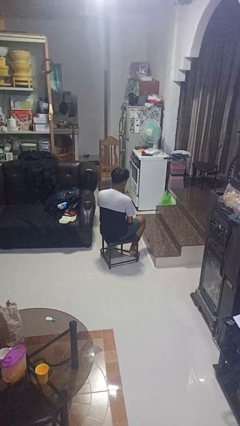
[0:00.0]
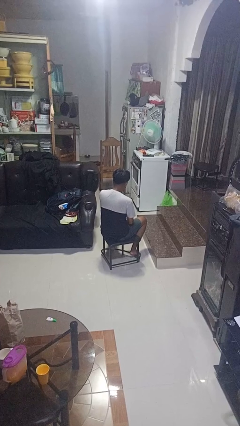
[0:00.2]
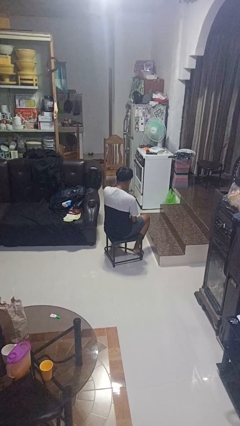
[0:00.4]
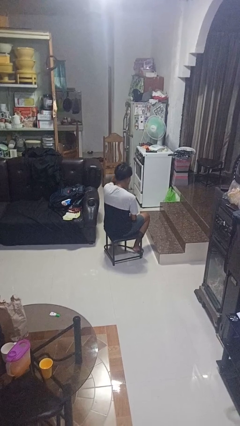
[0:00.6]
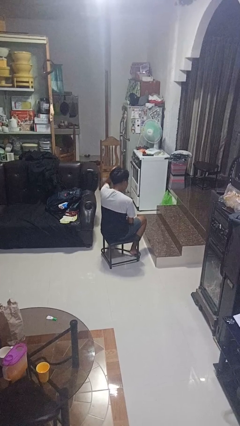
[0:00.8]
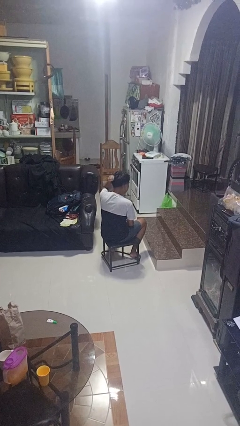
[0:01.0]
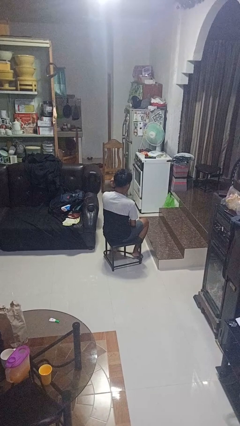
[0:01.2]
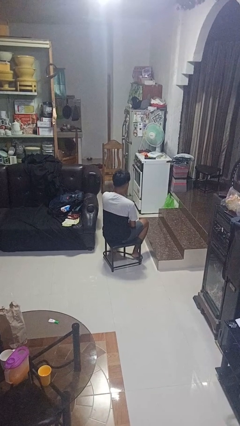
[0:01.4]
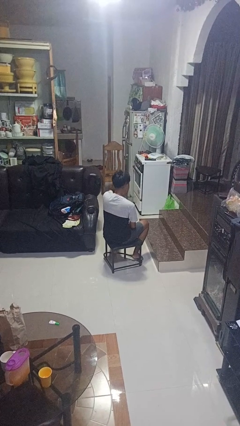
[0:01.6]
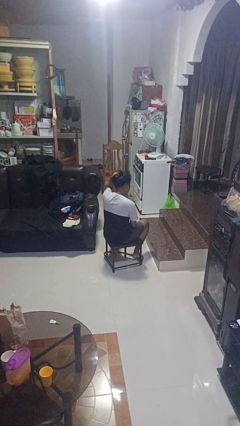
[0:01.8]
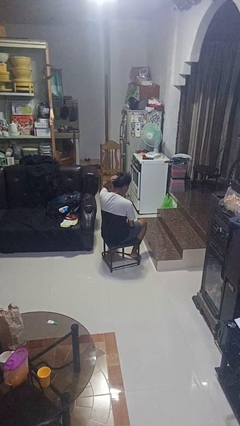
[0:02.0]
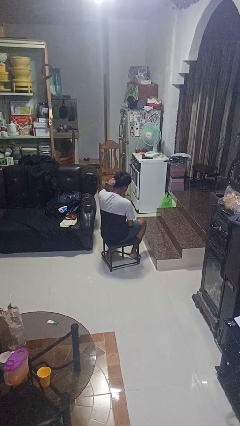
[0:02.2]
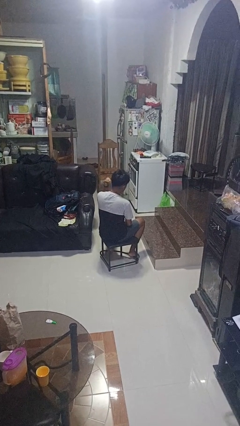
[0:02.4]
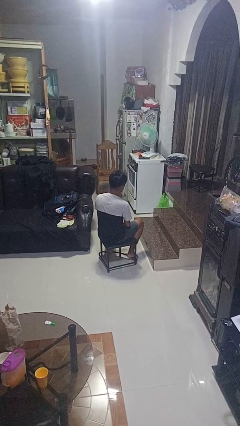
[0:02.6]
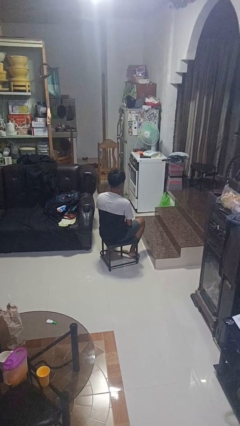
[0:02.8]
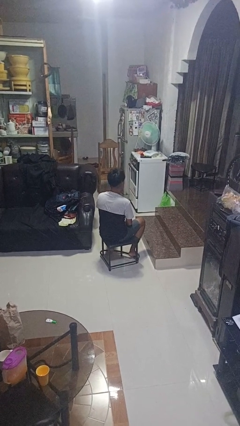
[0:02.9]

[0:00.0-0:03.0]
person strokes hair

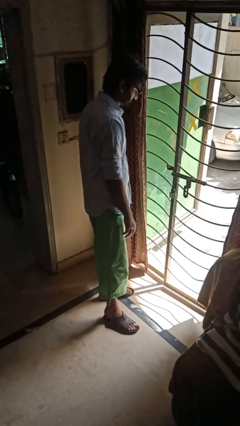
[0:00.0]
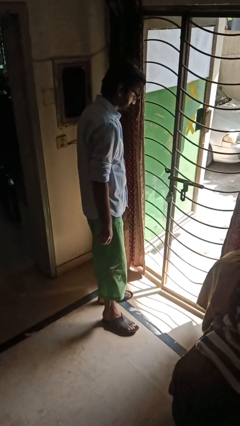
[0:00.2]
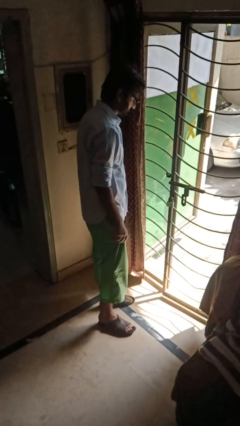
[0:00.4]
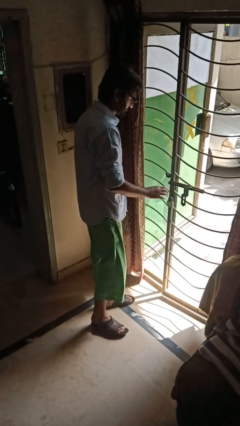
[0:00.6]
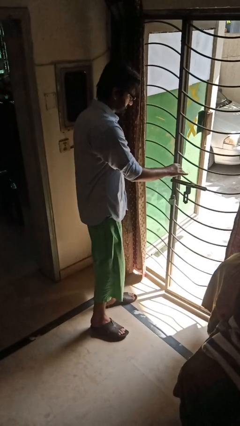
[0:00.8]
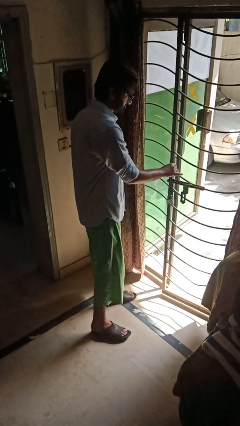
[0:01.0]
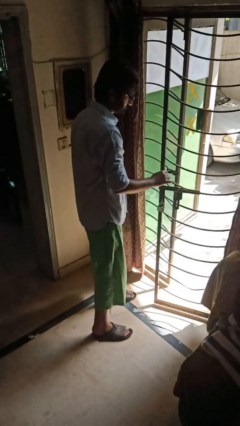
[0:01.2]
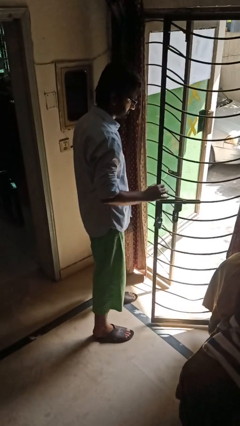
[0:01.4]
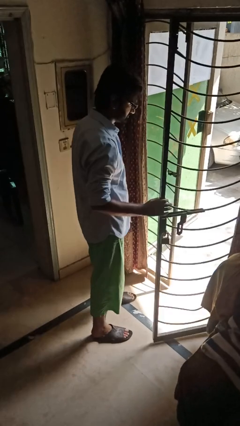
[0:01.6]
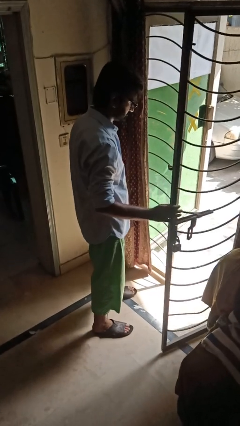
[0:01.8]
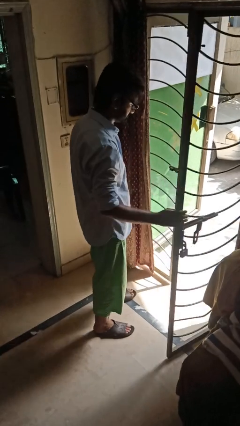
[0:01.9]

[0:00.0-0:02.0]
person opens gate

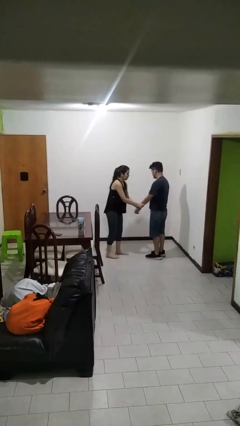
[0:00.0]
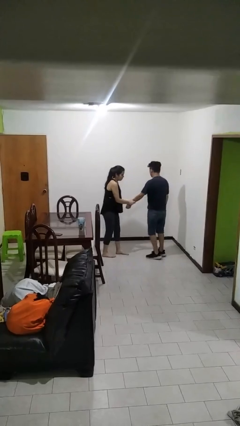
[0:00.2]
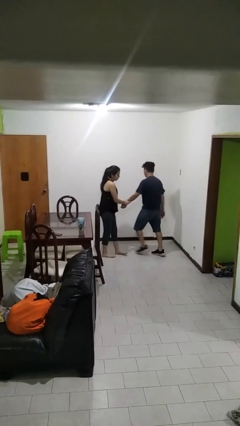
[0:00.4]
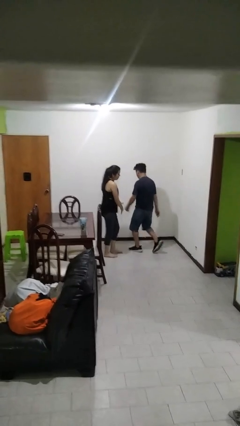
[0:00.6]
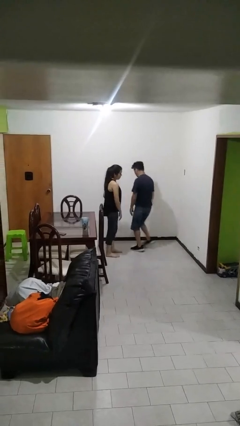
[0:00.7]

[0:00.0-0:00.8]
person grabs person by forearm

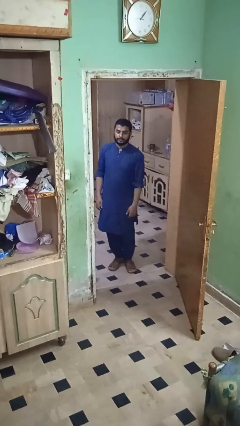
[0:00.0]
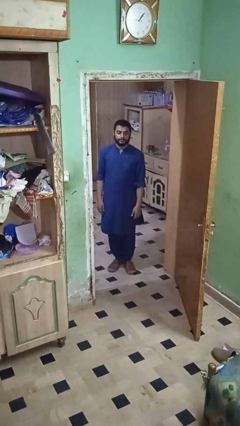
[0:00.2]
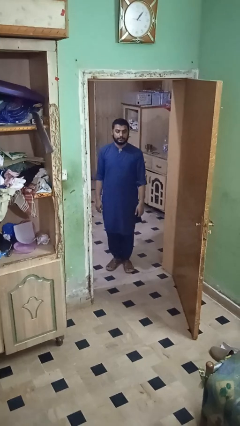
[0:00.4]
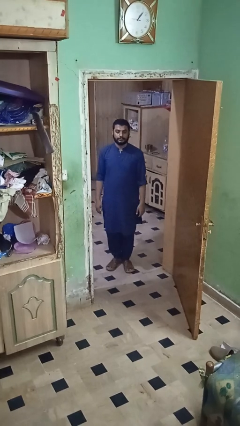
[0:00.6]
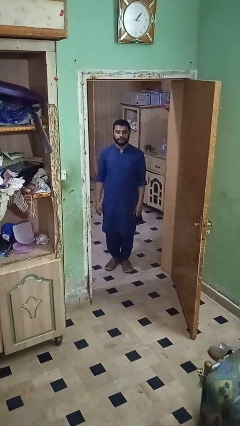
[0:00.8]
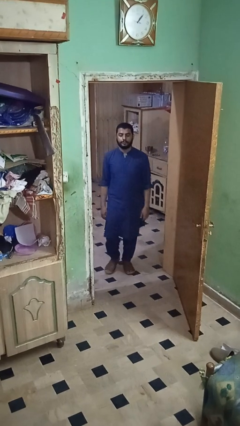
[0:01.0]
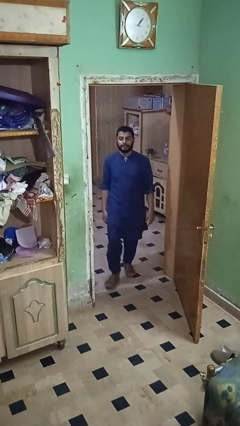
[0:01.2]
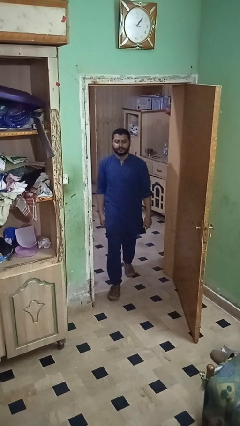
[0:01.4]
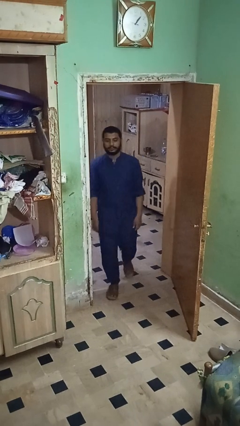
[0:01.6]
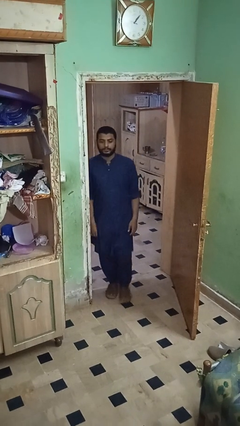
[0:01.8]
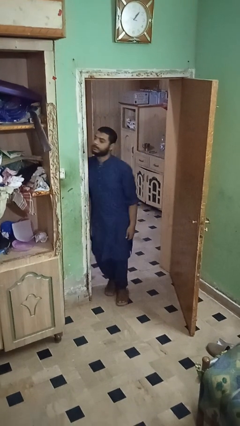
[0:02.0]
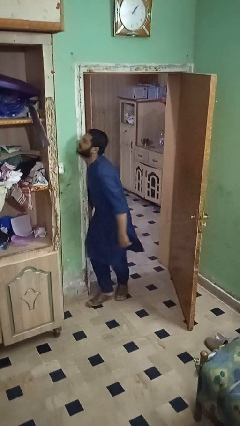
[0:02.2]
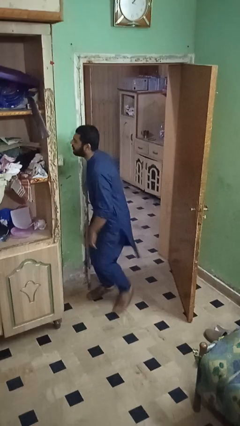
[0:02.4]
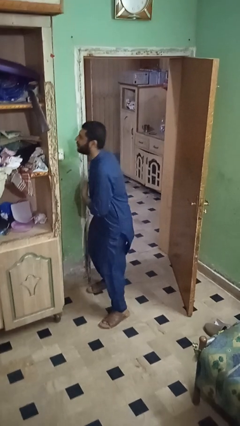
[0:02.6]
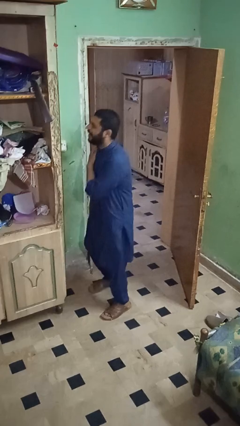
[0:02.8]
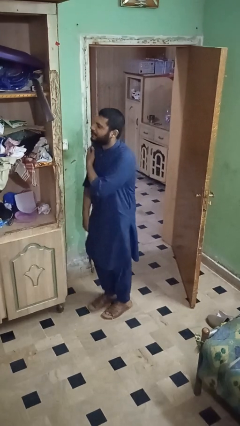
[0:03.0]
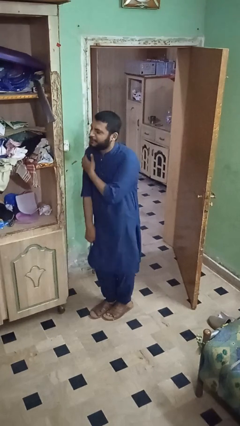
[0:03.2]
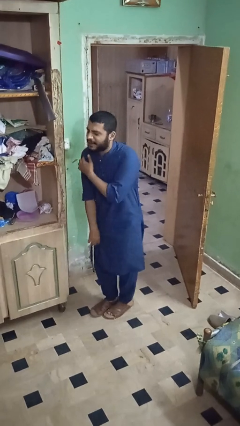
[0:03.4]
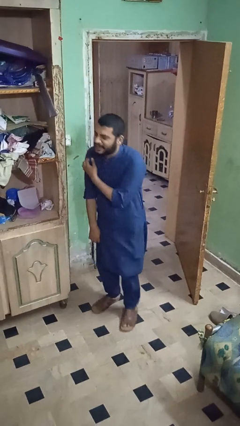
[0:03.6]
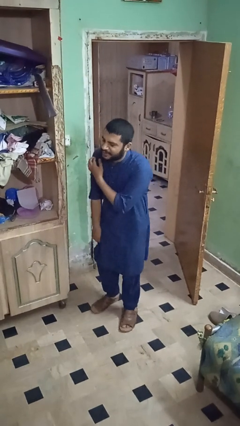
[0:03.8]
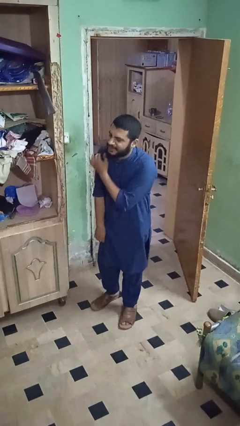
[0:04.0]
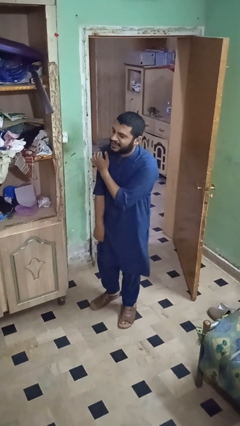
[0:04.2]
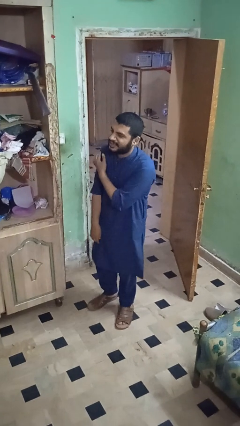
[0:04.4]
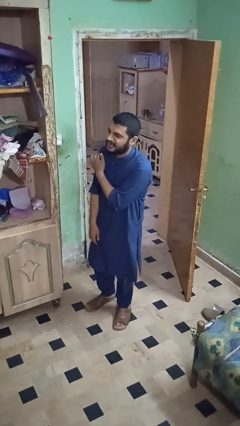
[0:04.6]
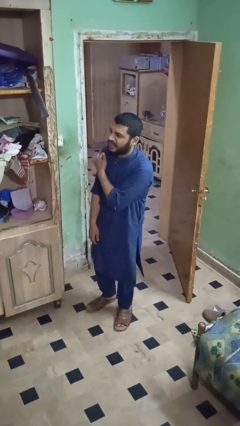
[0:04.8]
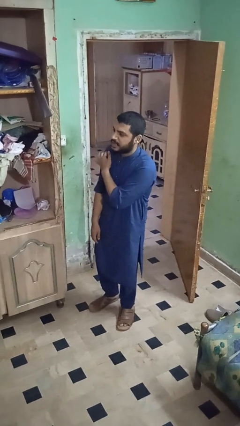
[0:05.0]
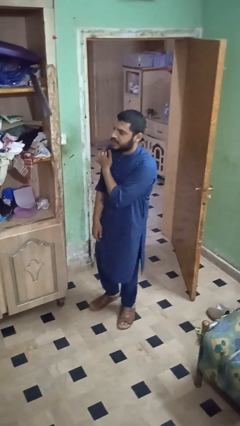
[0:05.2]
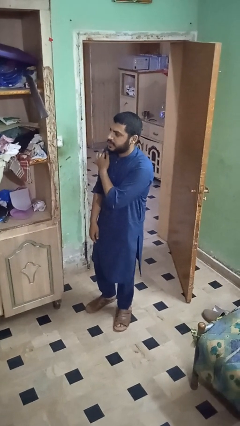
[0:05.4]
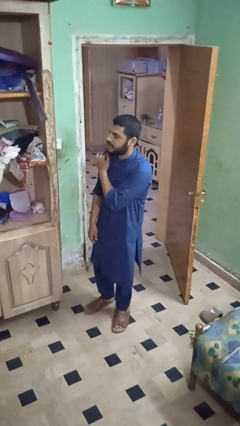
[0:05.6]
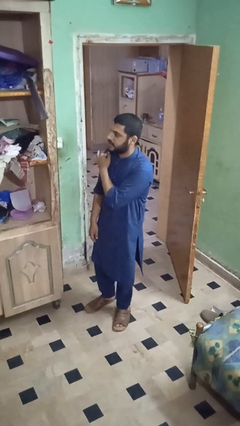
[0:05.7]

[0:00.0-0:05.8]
person bumps into wall

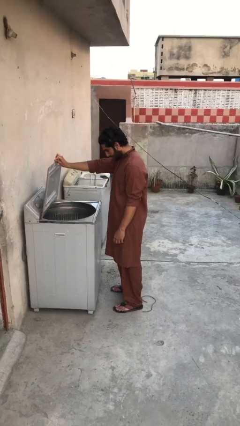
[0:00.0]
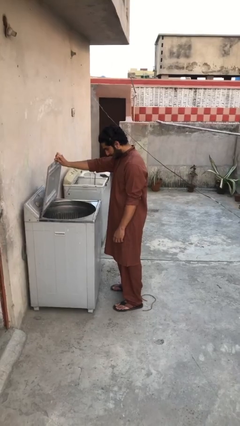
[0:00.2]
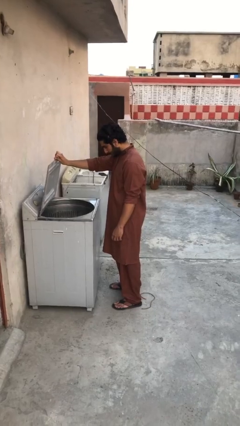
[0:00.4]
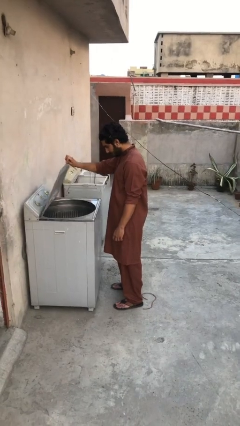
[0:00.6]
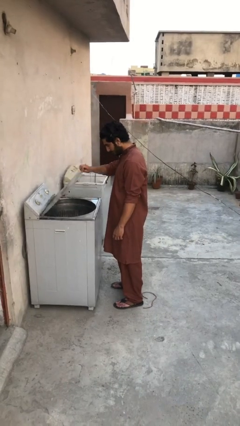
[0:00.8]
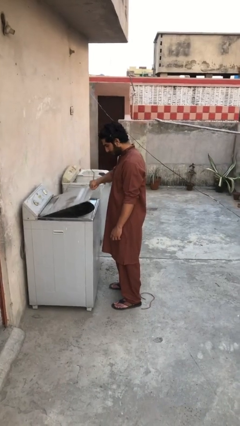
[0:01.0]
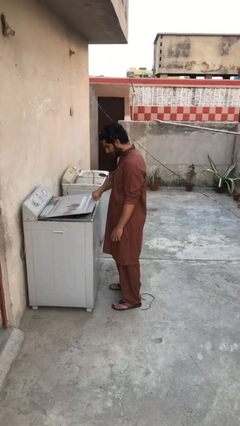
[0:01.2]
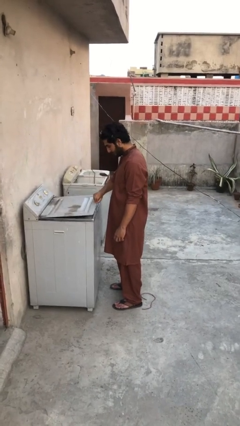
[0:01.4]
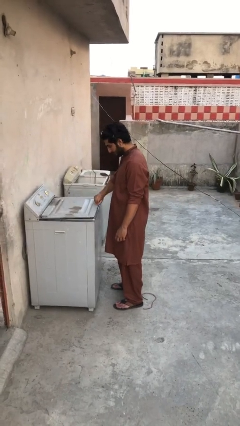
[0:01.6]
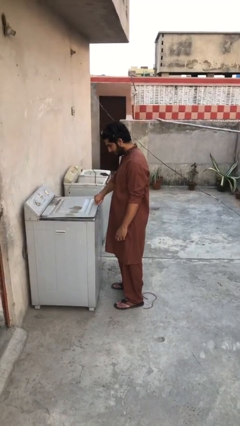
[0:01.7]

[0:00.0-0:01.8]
person closes clothes washer

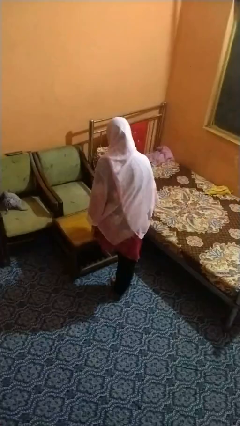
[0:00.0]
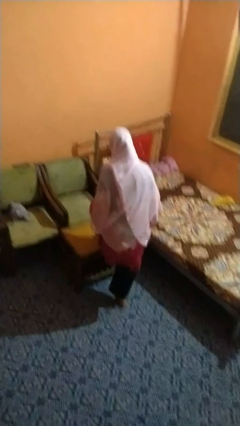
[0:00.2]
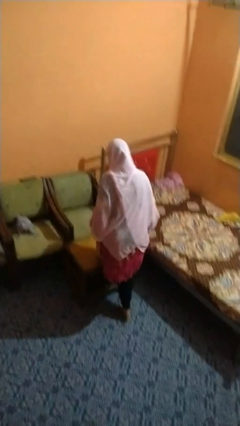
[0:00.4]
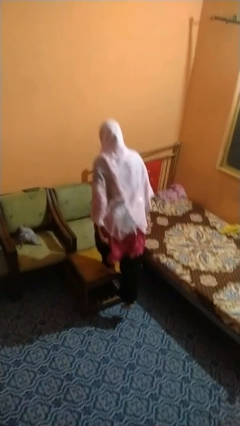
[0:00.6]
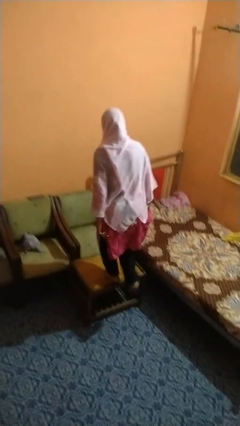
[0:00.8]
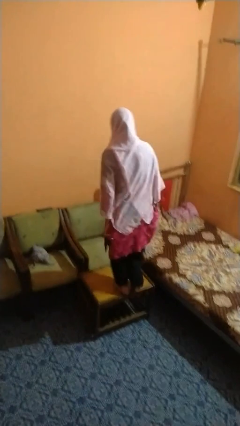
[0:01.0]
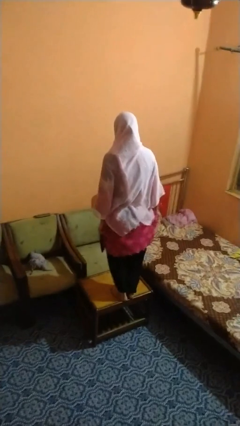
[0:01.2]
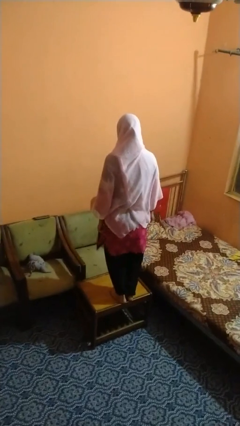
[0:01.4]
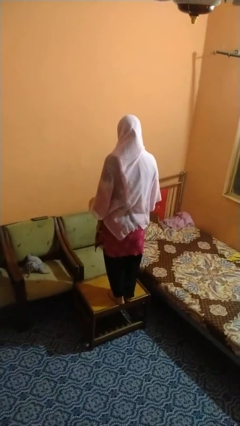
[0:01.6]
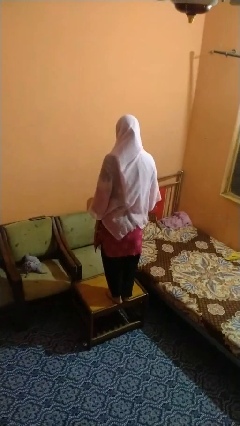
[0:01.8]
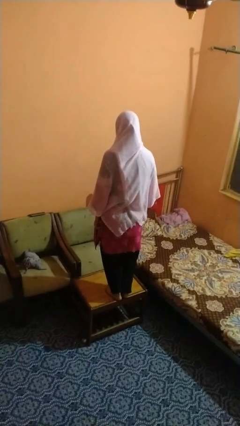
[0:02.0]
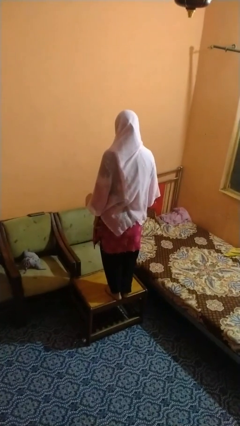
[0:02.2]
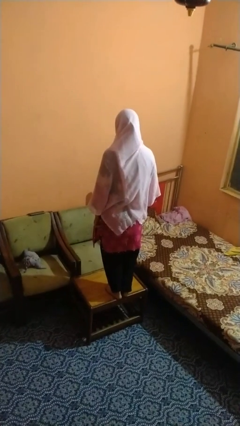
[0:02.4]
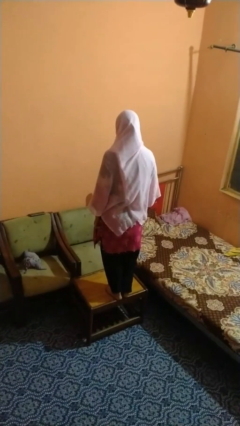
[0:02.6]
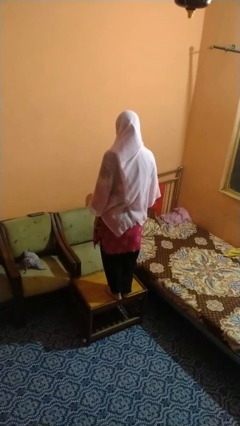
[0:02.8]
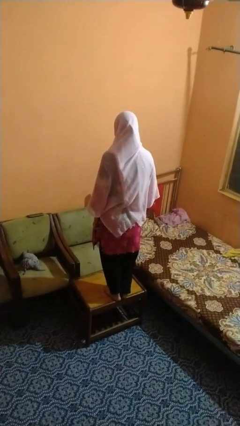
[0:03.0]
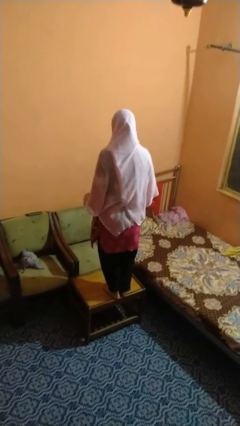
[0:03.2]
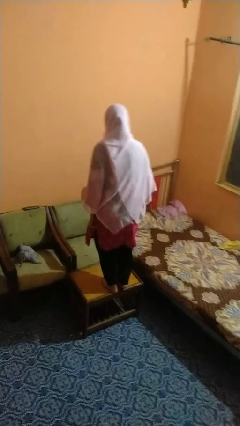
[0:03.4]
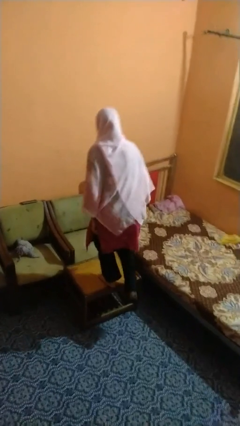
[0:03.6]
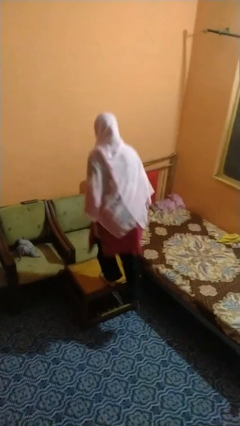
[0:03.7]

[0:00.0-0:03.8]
person climbs on table
